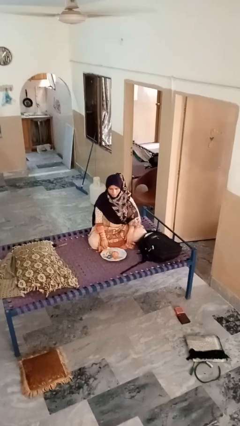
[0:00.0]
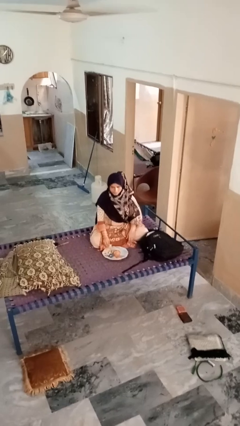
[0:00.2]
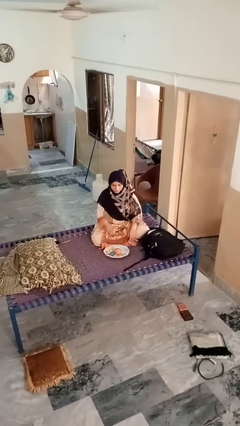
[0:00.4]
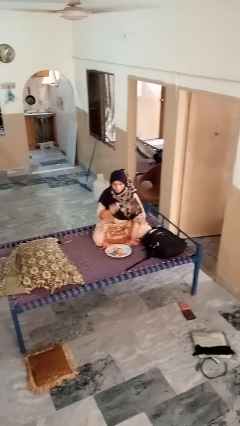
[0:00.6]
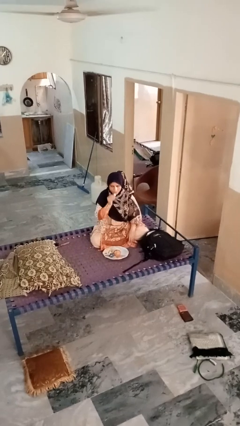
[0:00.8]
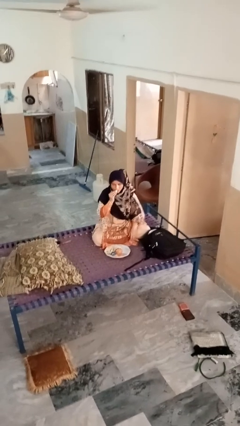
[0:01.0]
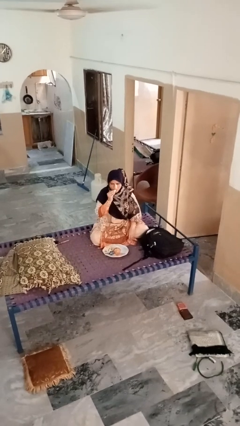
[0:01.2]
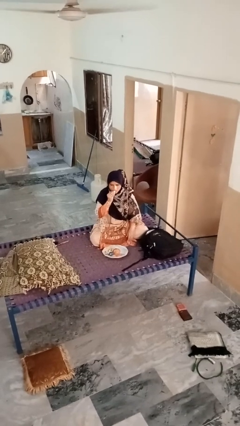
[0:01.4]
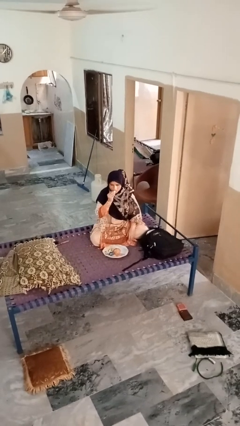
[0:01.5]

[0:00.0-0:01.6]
person eats apple

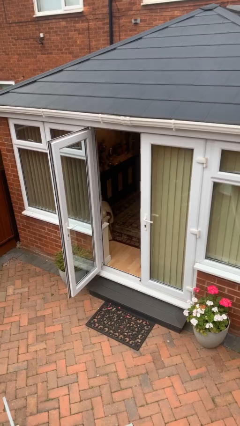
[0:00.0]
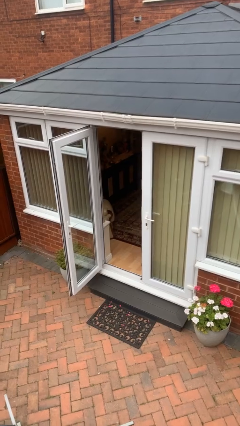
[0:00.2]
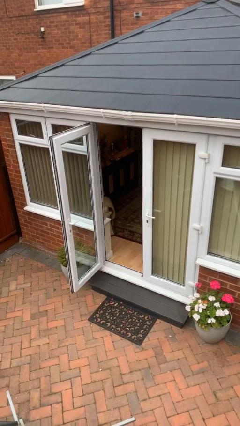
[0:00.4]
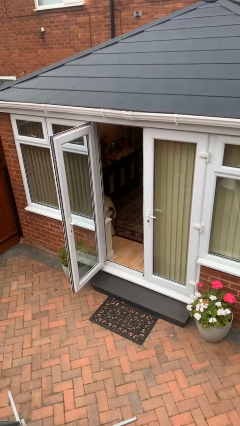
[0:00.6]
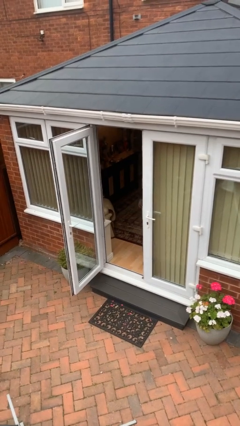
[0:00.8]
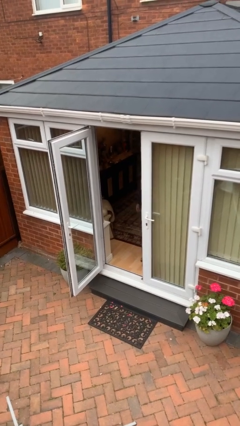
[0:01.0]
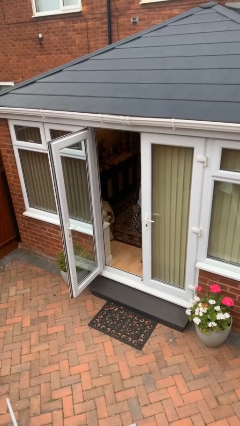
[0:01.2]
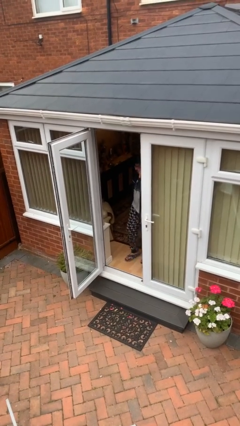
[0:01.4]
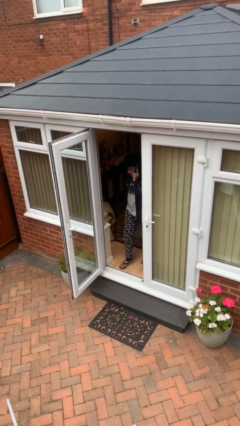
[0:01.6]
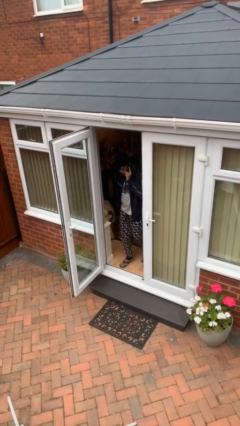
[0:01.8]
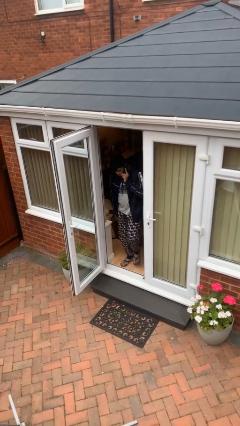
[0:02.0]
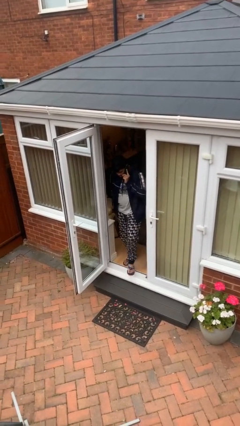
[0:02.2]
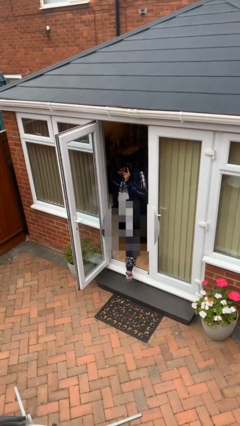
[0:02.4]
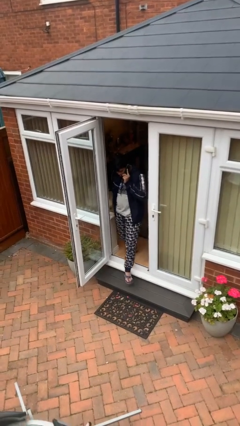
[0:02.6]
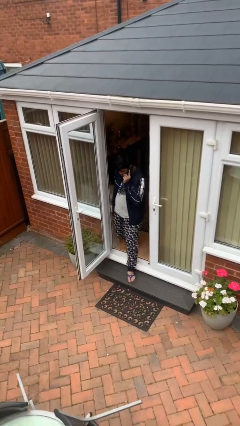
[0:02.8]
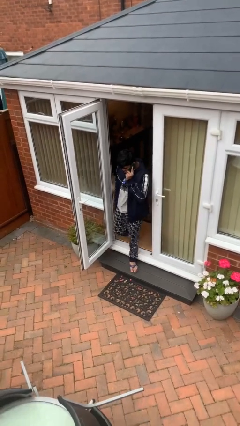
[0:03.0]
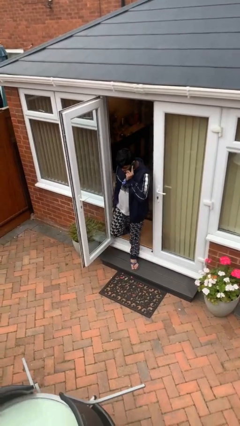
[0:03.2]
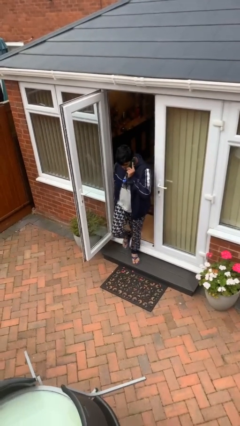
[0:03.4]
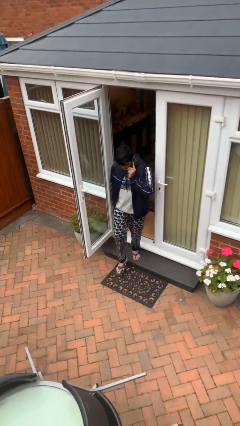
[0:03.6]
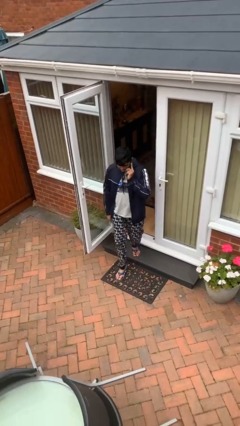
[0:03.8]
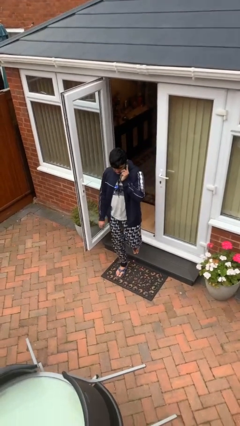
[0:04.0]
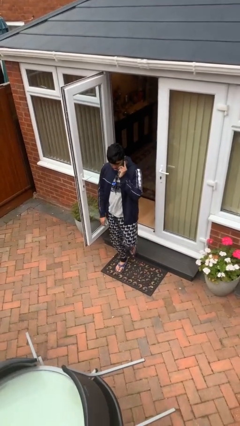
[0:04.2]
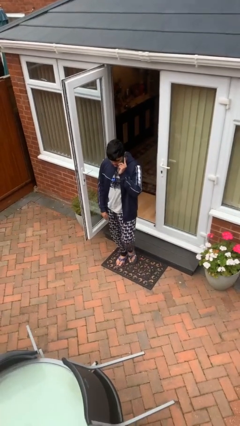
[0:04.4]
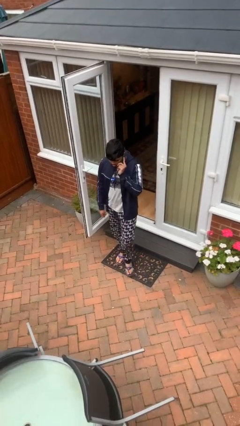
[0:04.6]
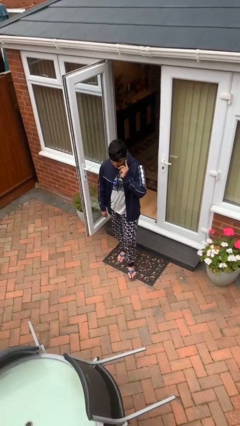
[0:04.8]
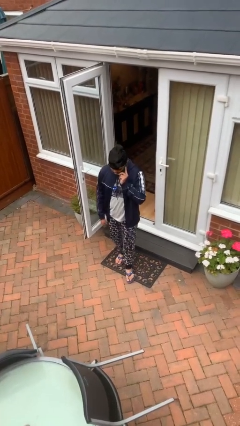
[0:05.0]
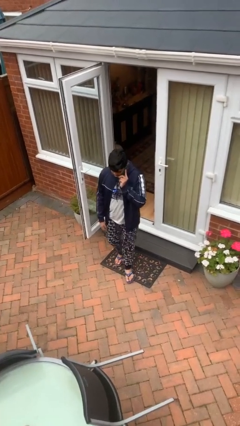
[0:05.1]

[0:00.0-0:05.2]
person enters scene through structure

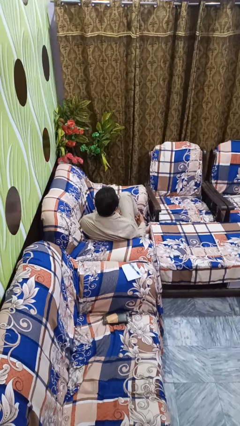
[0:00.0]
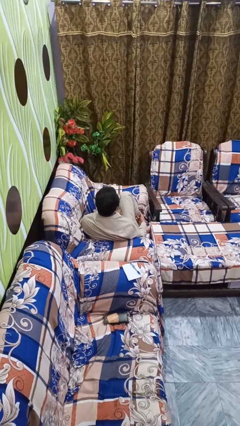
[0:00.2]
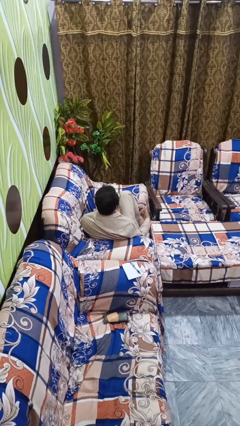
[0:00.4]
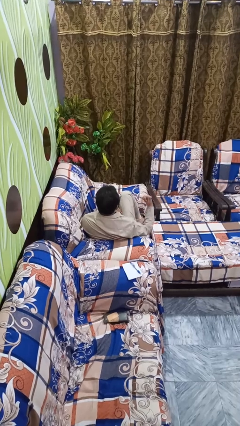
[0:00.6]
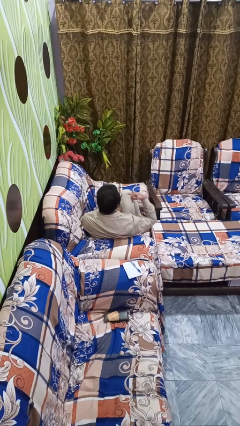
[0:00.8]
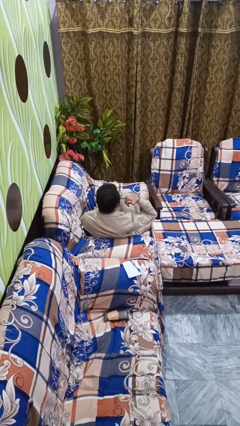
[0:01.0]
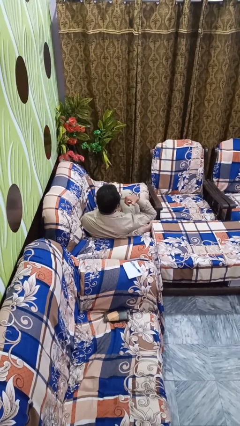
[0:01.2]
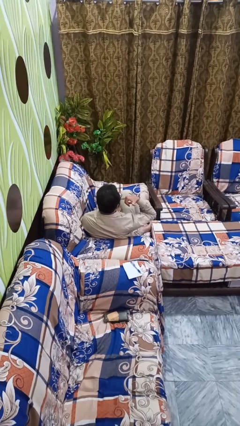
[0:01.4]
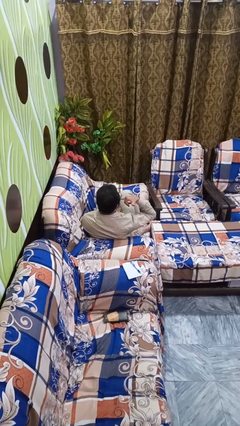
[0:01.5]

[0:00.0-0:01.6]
person gestures call me

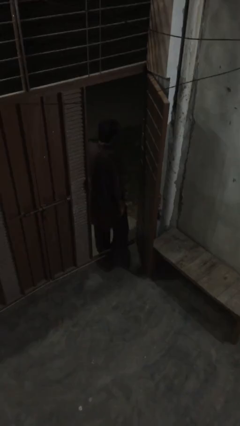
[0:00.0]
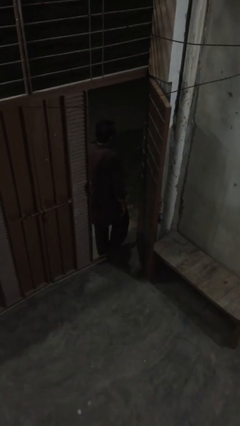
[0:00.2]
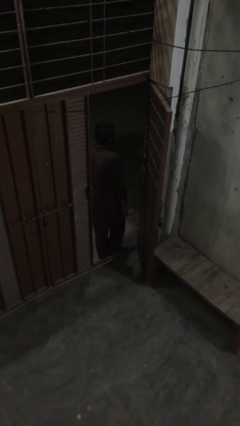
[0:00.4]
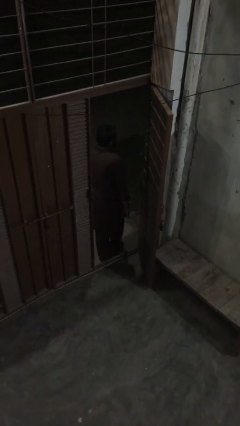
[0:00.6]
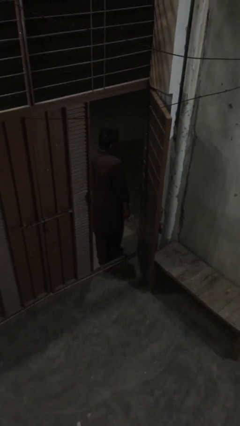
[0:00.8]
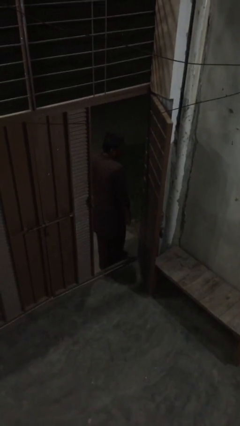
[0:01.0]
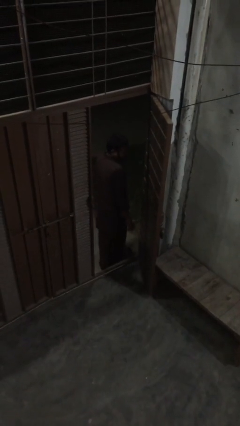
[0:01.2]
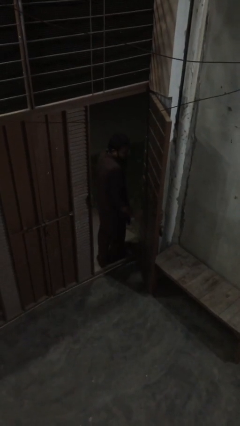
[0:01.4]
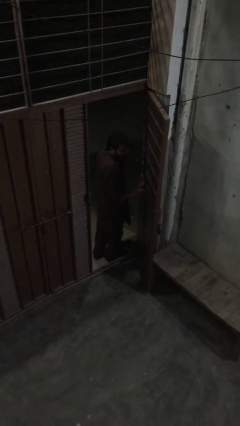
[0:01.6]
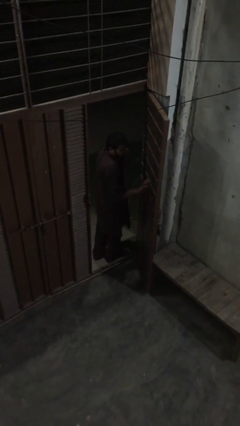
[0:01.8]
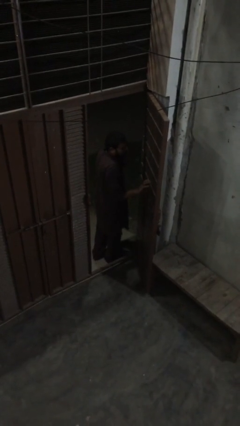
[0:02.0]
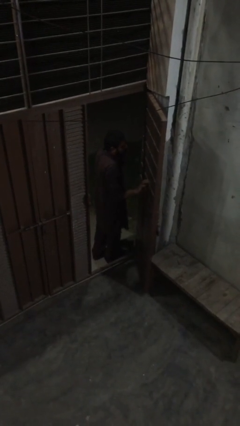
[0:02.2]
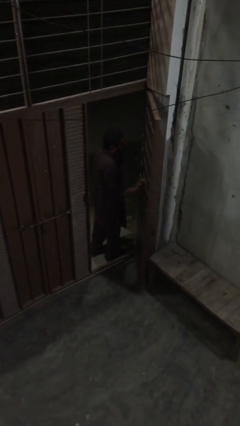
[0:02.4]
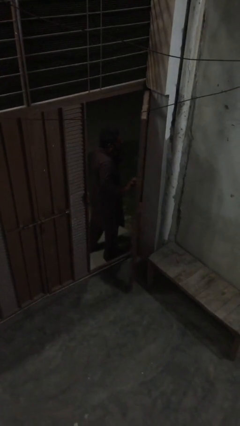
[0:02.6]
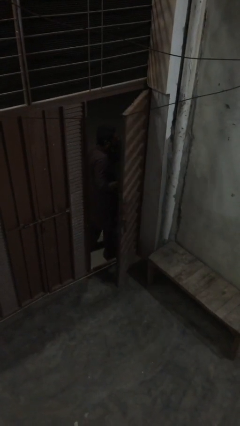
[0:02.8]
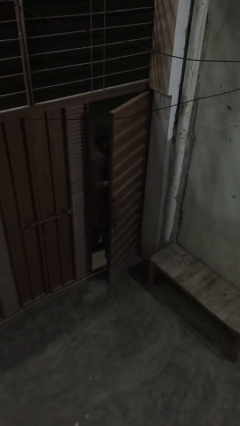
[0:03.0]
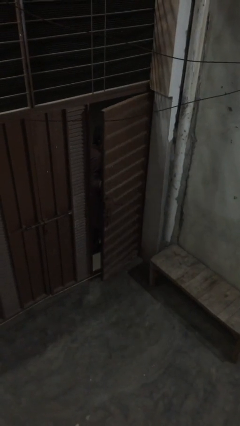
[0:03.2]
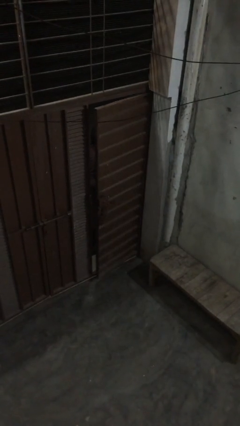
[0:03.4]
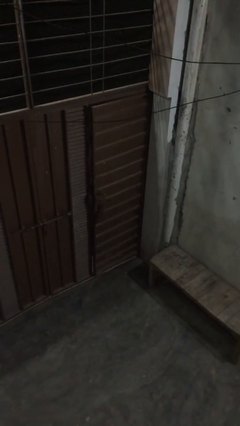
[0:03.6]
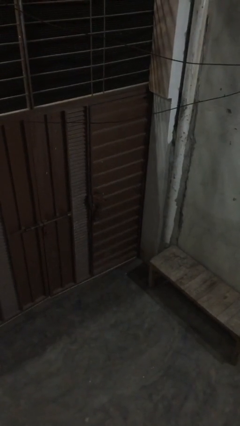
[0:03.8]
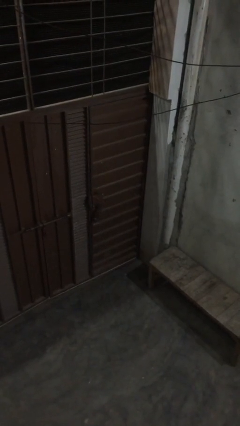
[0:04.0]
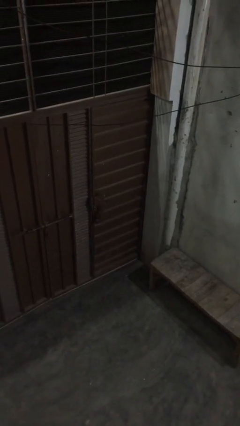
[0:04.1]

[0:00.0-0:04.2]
person closes facility door

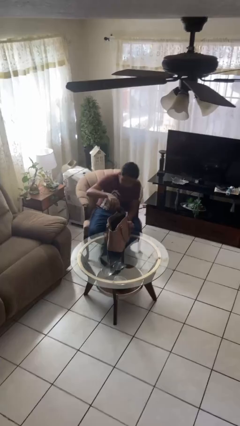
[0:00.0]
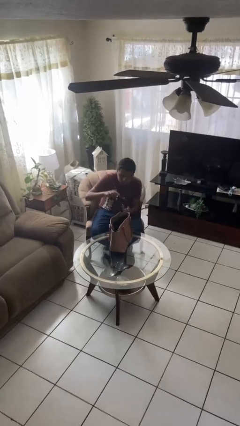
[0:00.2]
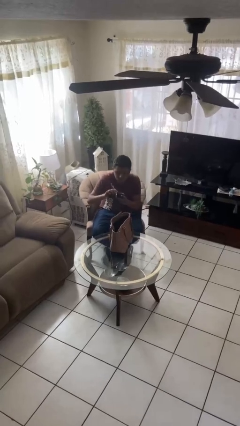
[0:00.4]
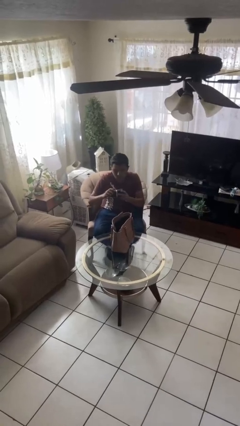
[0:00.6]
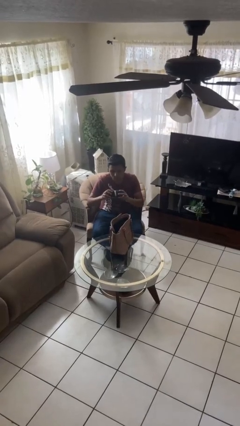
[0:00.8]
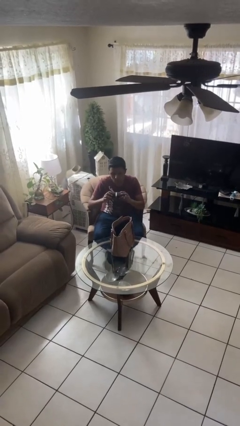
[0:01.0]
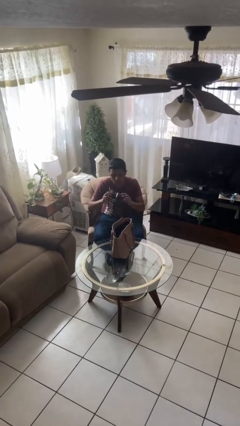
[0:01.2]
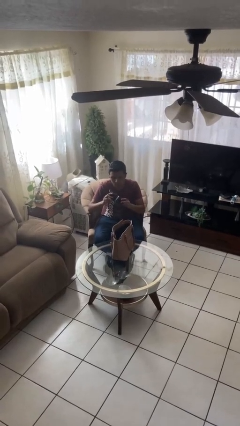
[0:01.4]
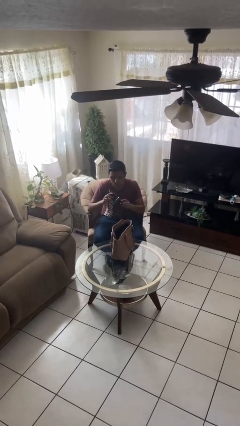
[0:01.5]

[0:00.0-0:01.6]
person takes object from purse

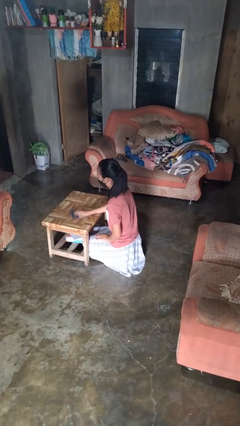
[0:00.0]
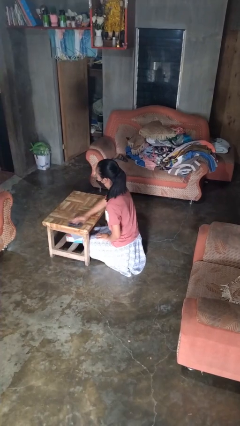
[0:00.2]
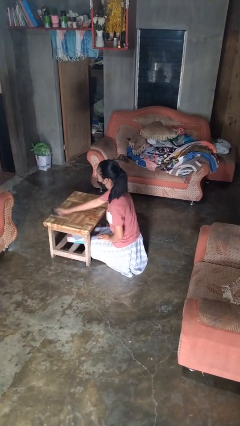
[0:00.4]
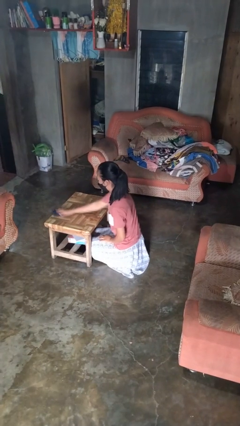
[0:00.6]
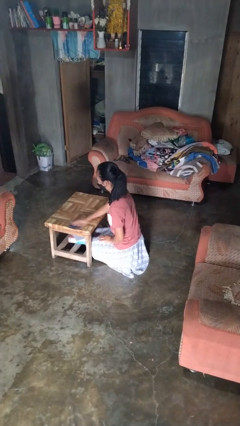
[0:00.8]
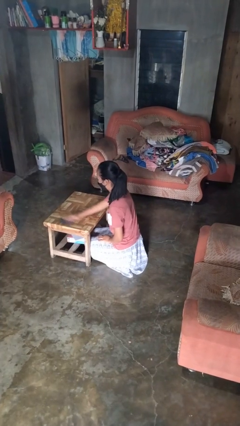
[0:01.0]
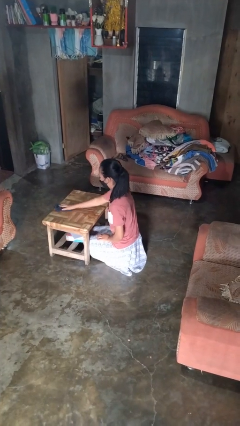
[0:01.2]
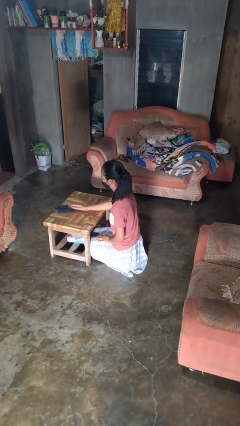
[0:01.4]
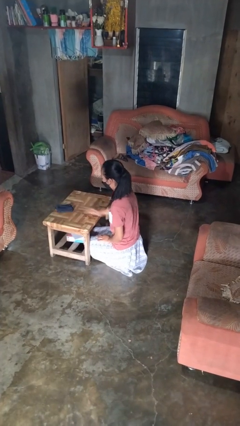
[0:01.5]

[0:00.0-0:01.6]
person cleans table with rag

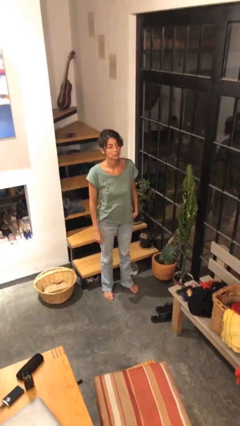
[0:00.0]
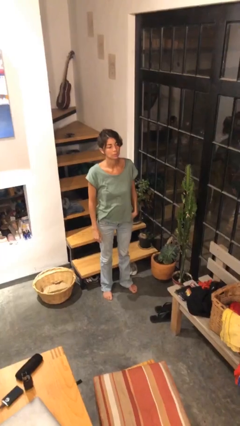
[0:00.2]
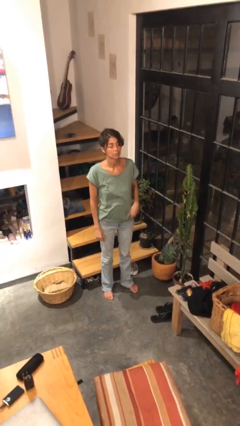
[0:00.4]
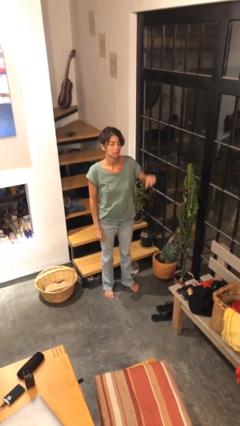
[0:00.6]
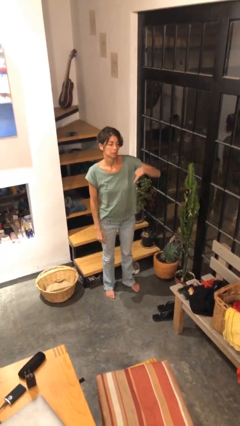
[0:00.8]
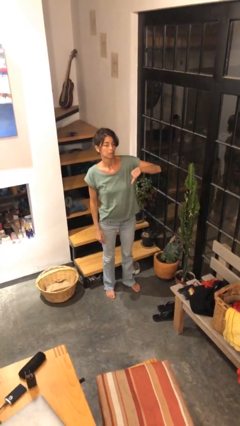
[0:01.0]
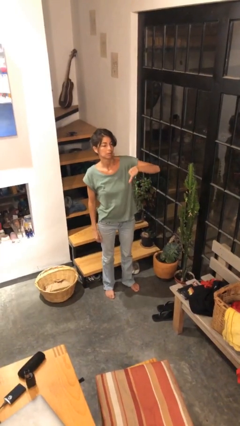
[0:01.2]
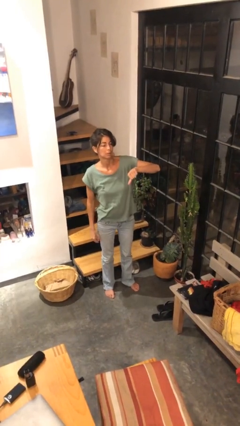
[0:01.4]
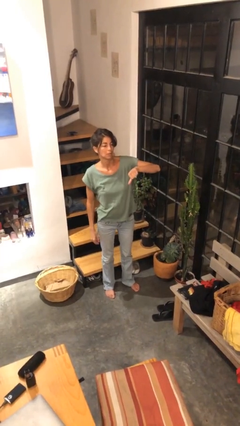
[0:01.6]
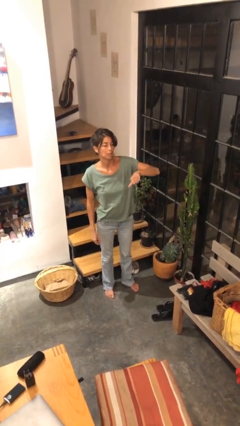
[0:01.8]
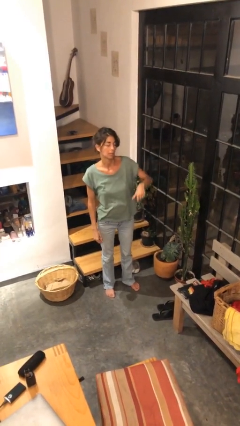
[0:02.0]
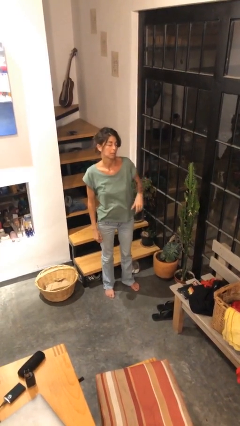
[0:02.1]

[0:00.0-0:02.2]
person gestures thumbs down
